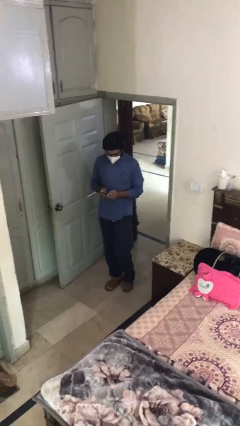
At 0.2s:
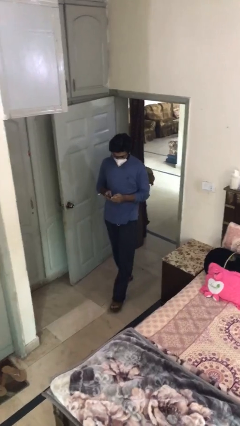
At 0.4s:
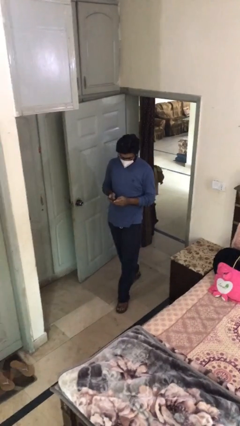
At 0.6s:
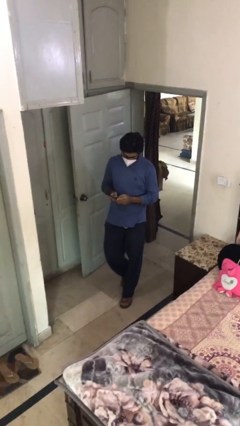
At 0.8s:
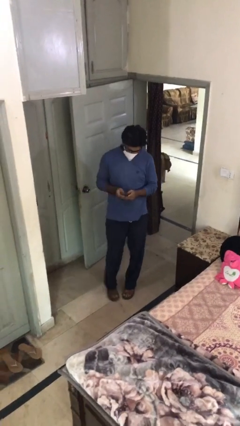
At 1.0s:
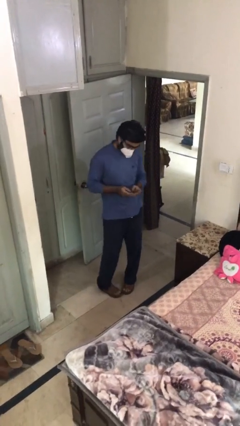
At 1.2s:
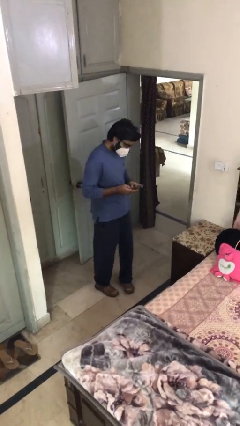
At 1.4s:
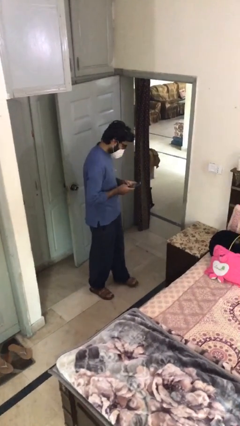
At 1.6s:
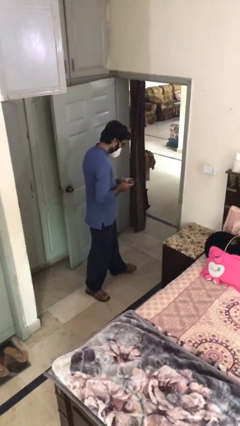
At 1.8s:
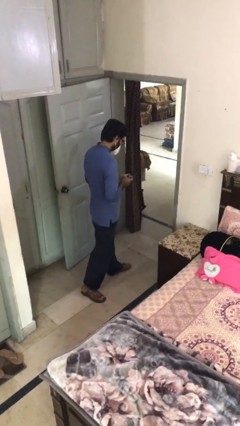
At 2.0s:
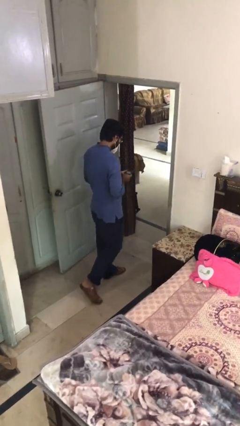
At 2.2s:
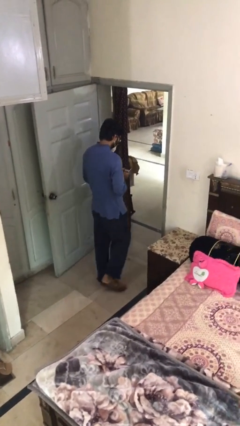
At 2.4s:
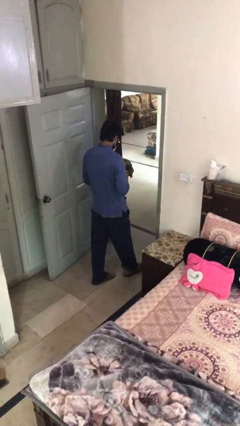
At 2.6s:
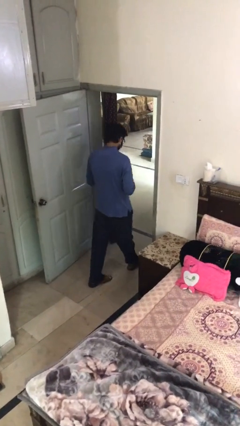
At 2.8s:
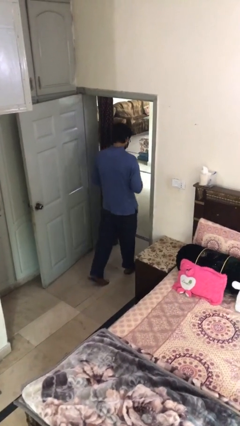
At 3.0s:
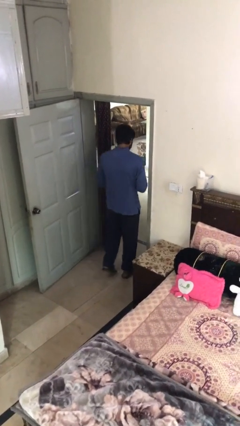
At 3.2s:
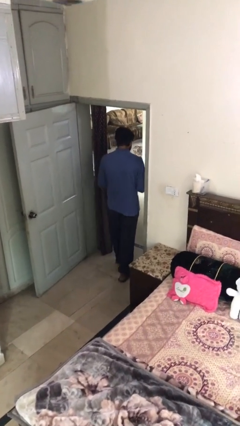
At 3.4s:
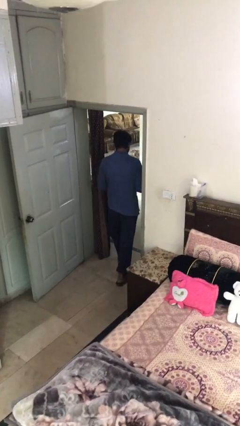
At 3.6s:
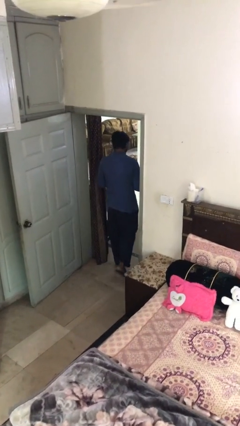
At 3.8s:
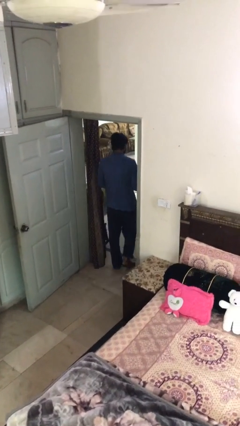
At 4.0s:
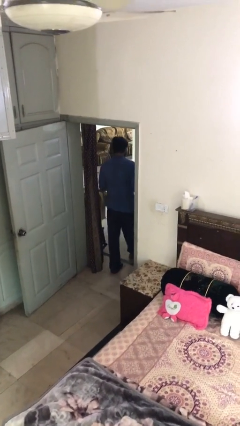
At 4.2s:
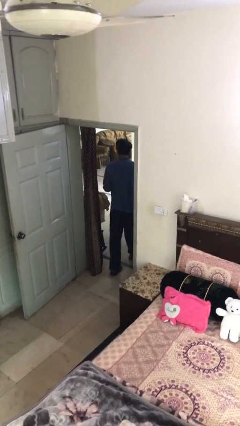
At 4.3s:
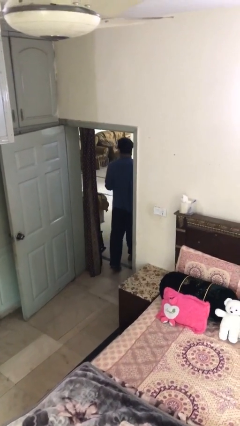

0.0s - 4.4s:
person exits scene through structure

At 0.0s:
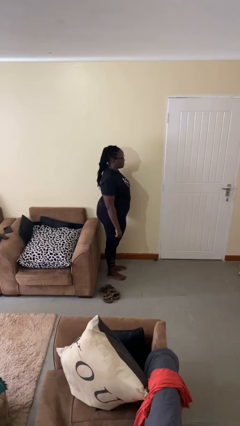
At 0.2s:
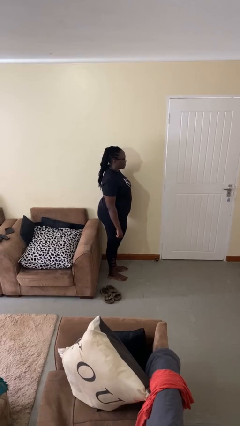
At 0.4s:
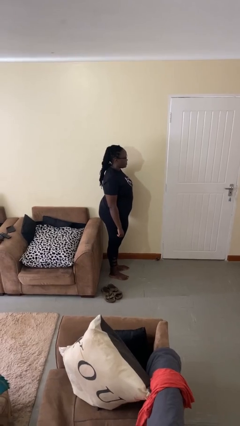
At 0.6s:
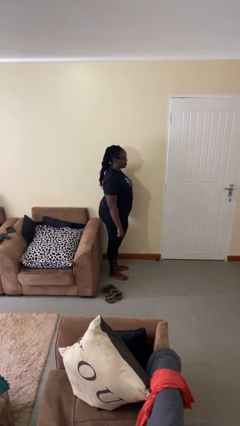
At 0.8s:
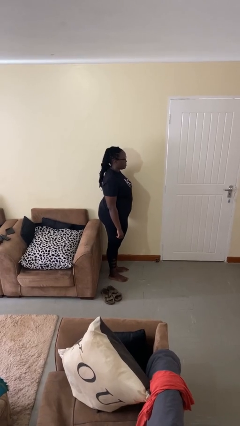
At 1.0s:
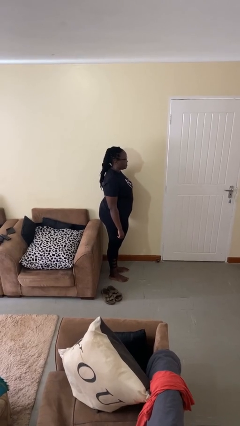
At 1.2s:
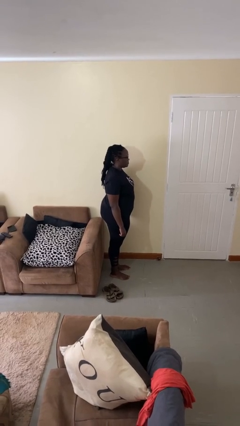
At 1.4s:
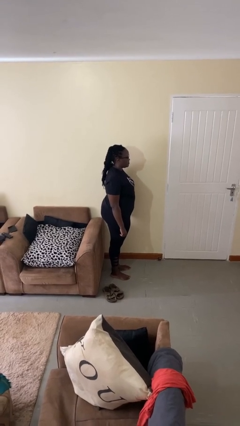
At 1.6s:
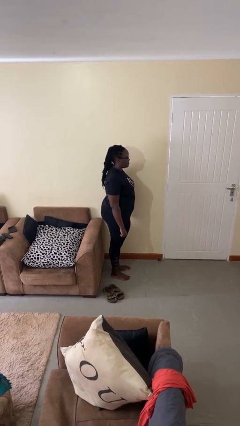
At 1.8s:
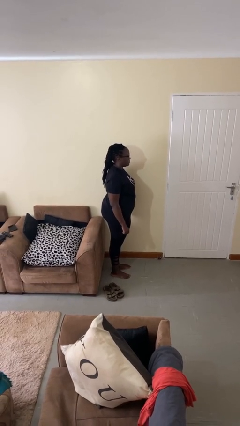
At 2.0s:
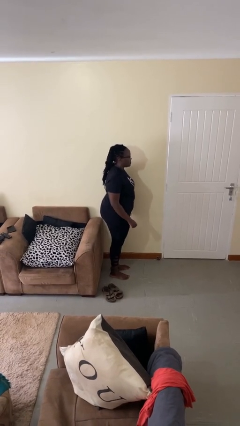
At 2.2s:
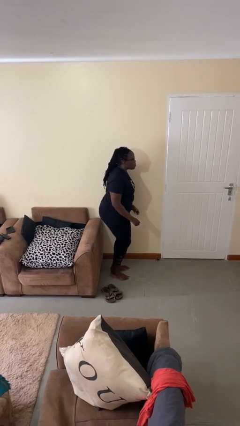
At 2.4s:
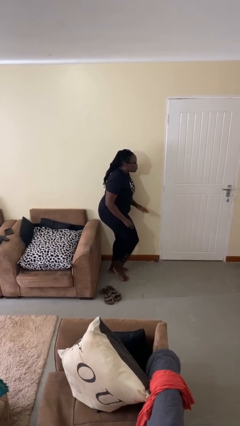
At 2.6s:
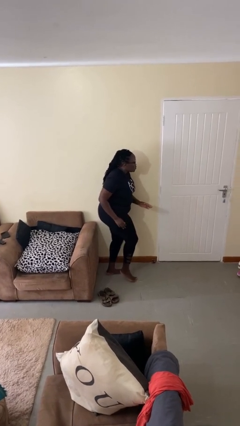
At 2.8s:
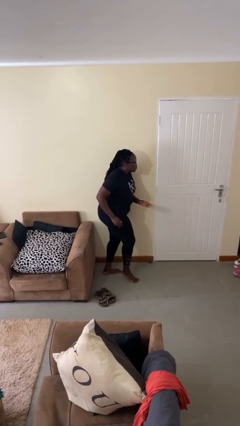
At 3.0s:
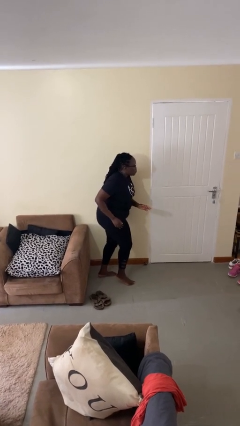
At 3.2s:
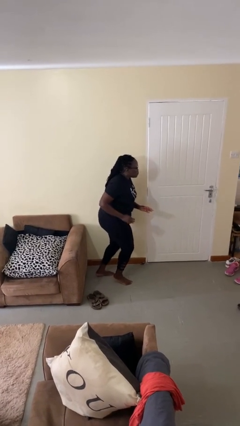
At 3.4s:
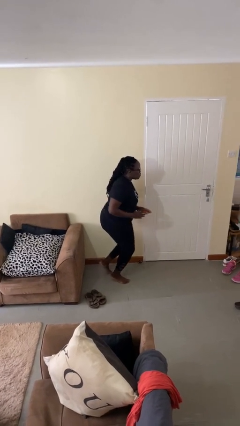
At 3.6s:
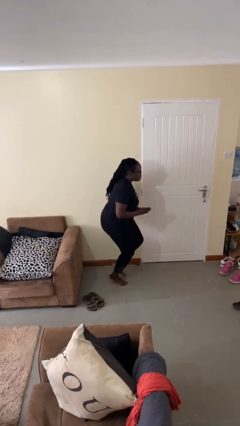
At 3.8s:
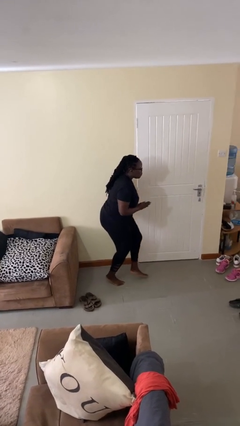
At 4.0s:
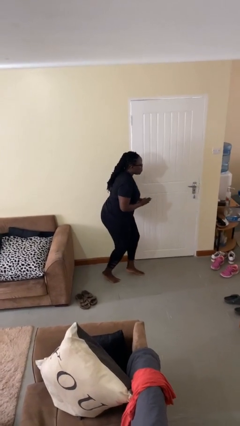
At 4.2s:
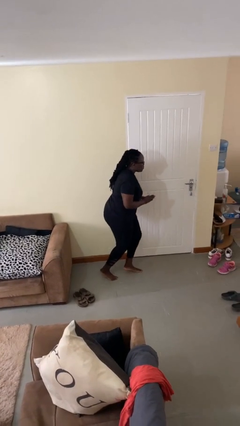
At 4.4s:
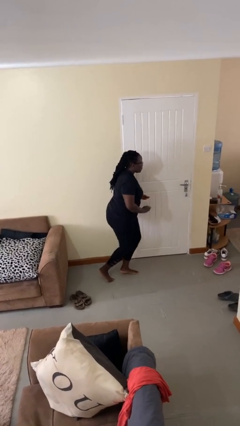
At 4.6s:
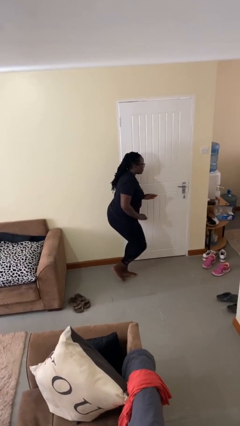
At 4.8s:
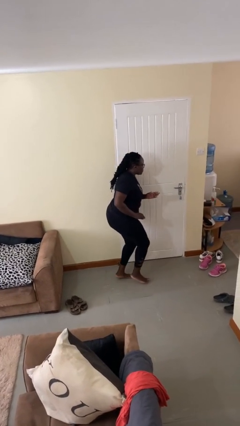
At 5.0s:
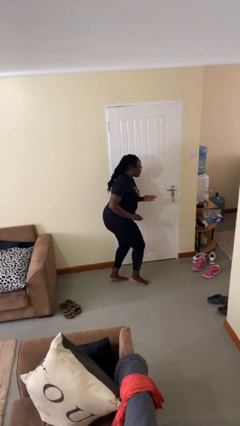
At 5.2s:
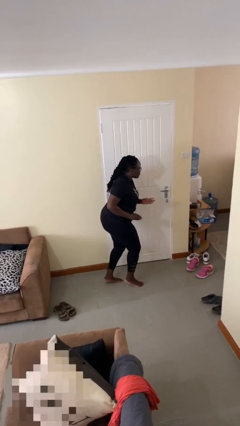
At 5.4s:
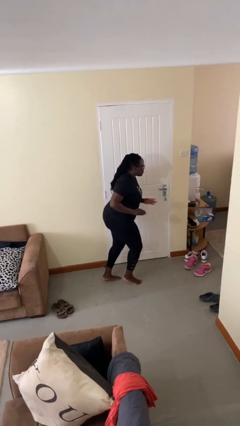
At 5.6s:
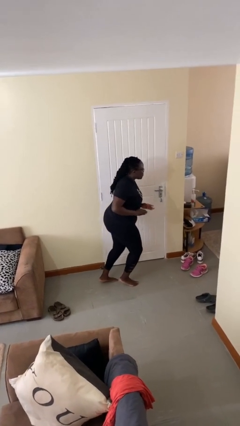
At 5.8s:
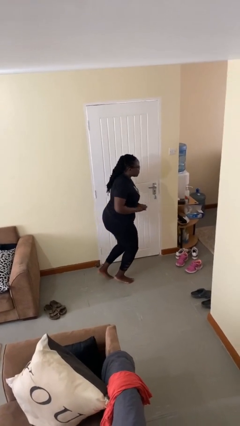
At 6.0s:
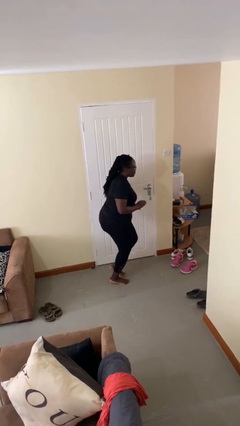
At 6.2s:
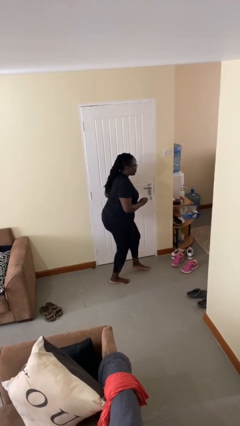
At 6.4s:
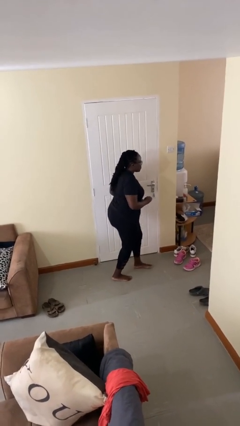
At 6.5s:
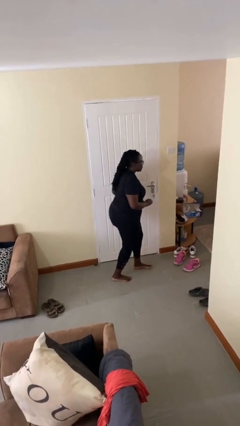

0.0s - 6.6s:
person walks tiptoe

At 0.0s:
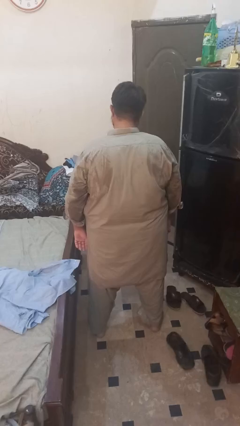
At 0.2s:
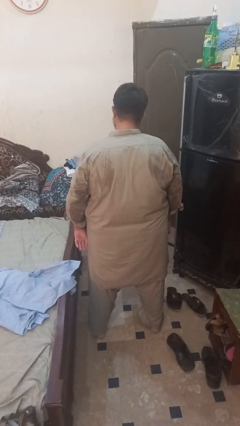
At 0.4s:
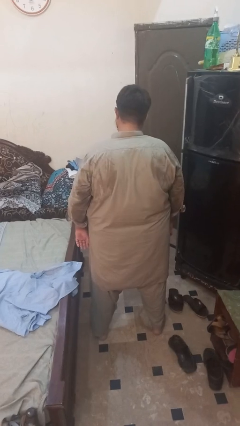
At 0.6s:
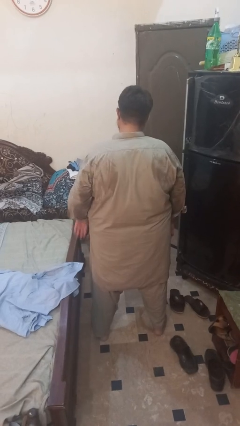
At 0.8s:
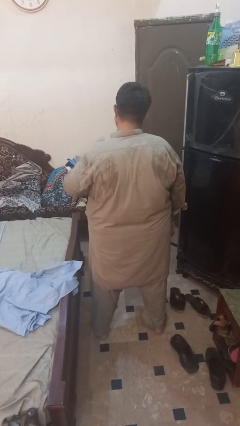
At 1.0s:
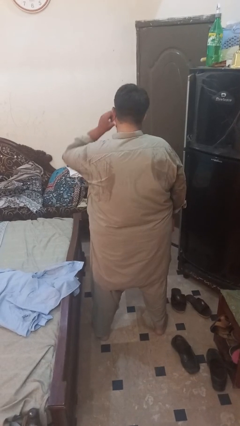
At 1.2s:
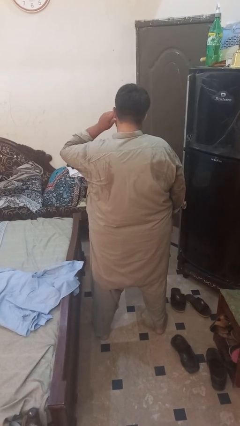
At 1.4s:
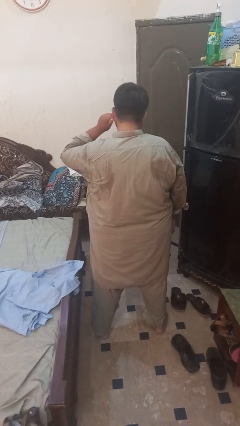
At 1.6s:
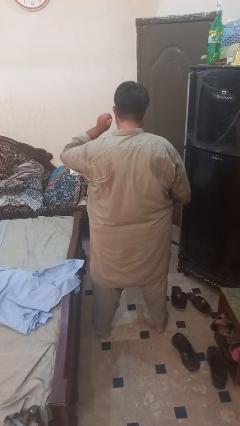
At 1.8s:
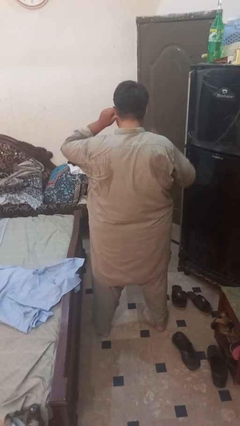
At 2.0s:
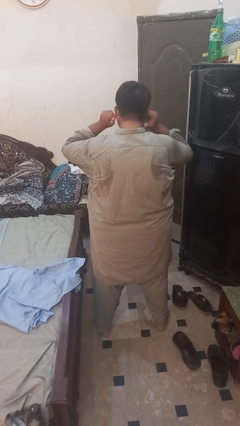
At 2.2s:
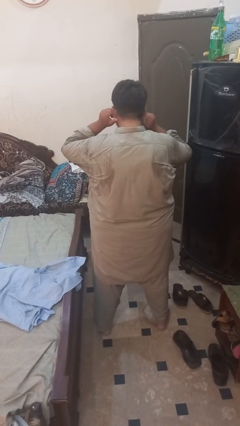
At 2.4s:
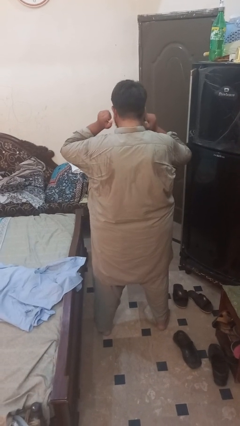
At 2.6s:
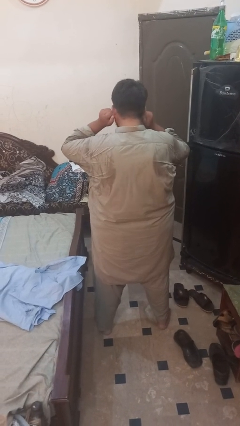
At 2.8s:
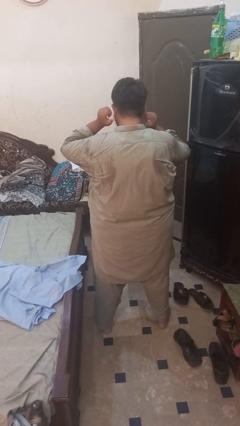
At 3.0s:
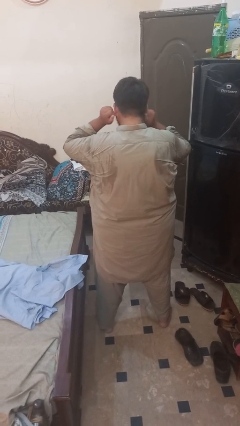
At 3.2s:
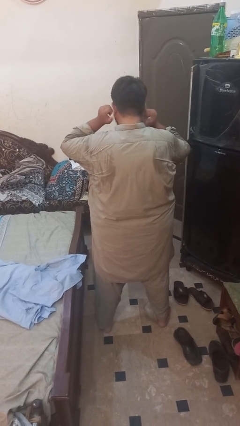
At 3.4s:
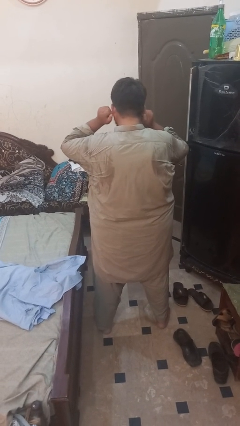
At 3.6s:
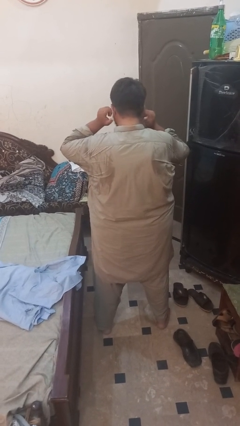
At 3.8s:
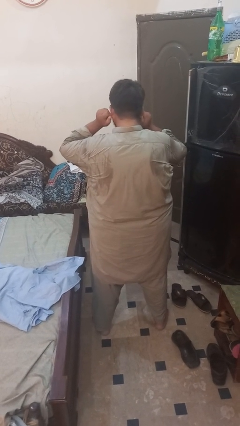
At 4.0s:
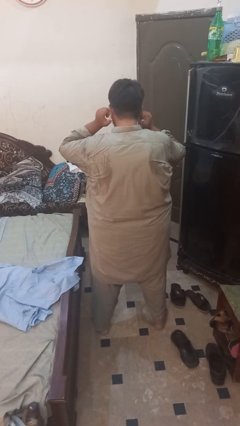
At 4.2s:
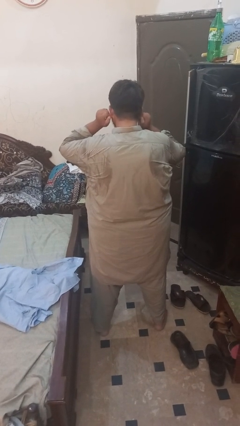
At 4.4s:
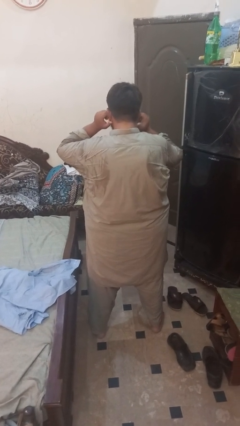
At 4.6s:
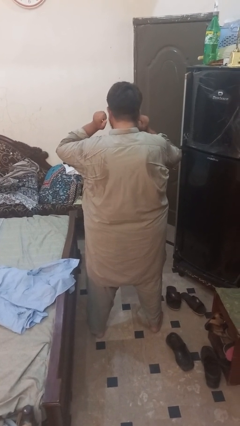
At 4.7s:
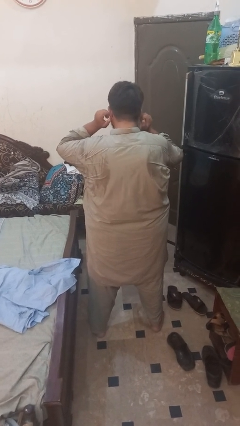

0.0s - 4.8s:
person touches earlobe

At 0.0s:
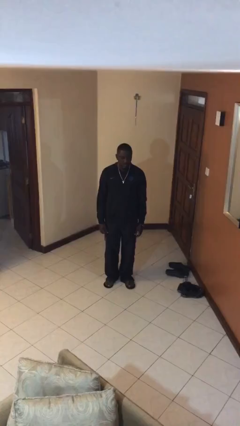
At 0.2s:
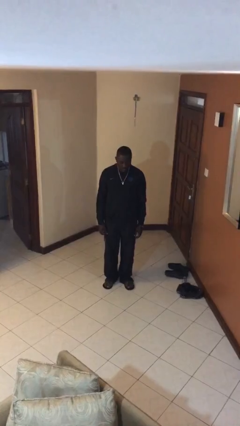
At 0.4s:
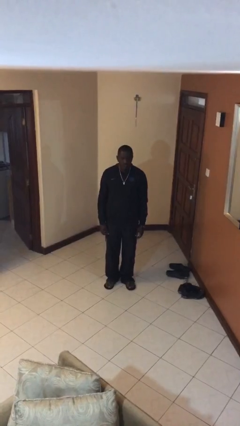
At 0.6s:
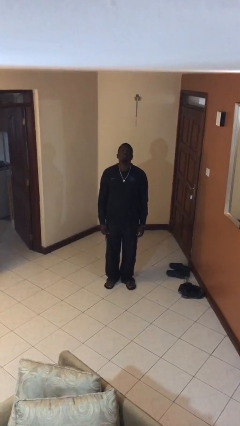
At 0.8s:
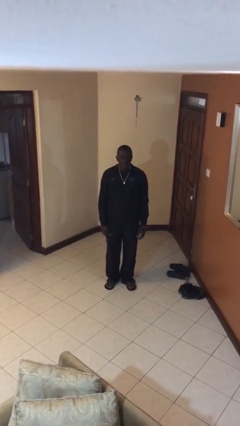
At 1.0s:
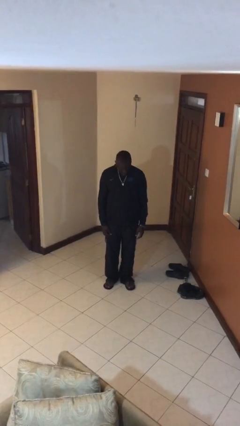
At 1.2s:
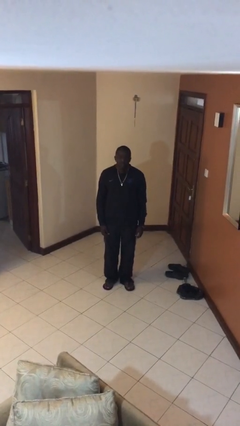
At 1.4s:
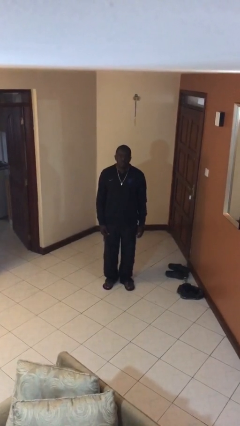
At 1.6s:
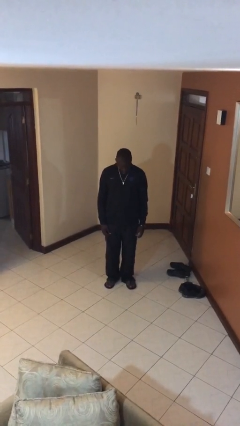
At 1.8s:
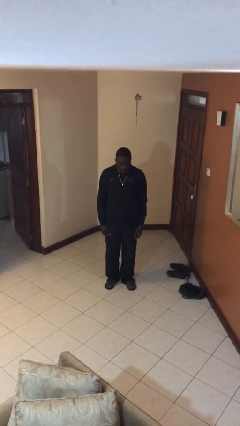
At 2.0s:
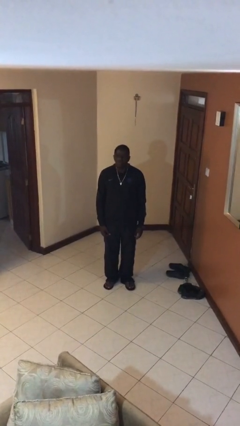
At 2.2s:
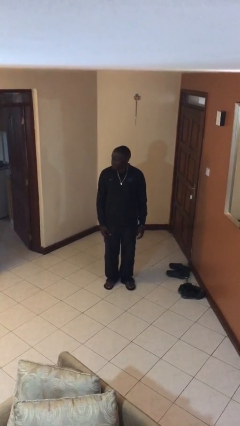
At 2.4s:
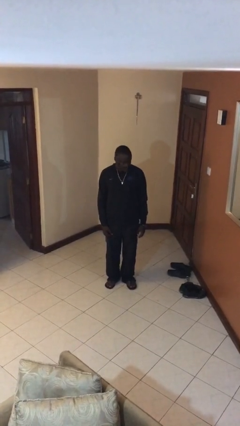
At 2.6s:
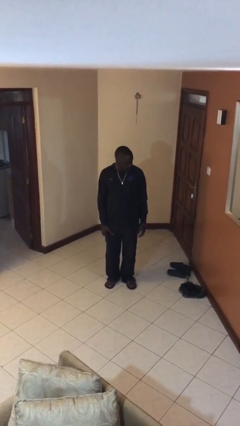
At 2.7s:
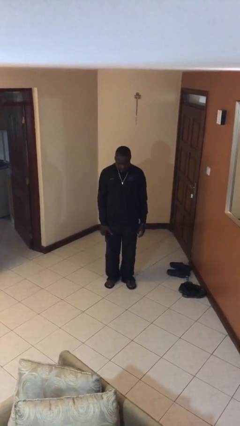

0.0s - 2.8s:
person nods head
